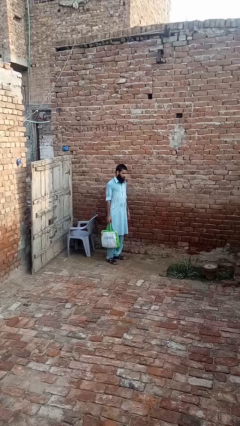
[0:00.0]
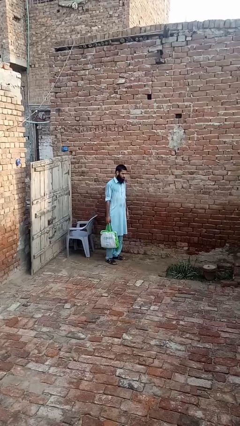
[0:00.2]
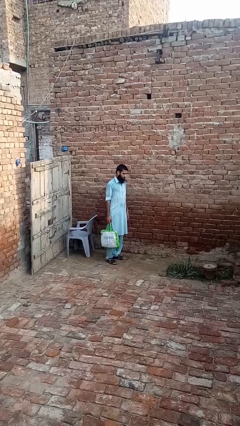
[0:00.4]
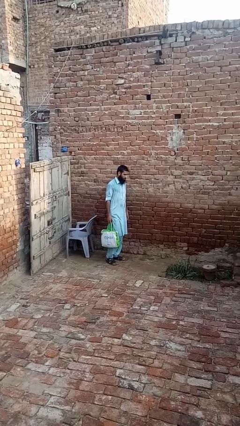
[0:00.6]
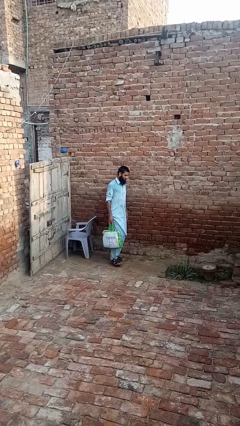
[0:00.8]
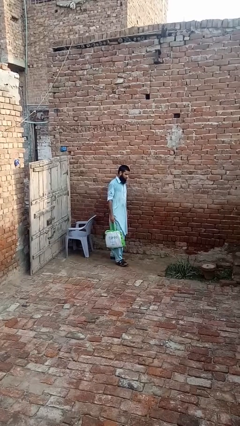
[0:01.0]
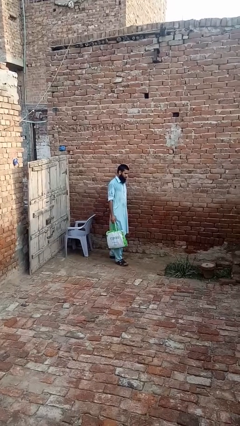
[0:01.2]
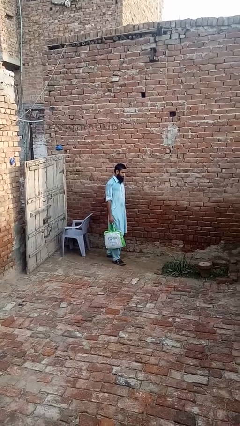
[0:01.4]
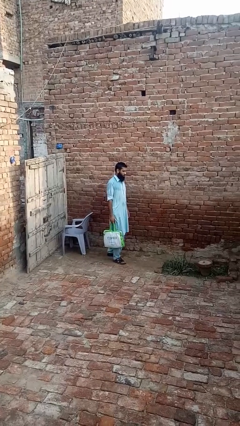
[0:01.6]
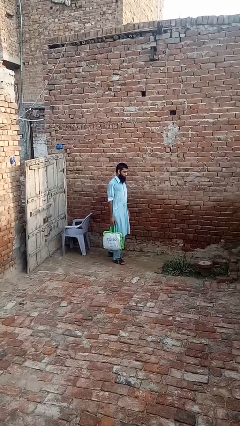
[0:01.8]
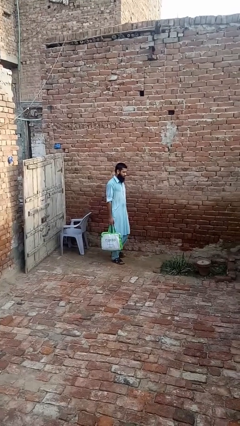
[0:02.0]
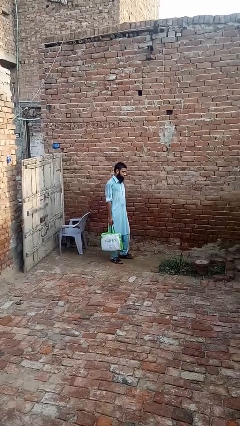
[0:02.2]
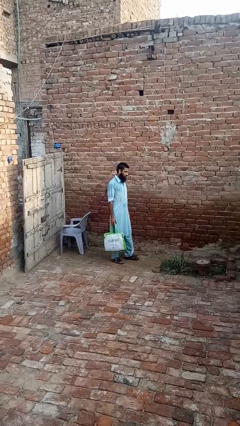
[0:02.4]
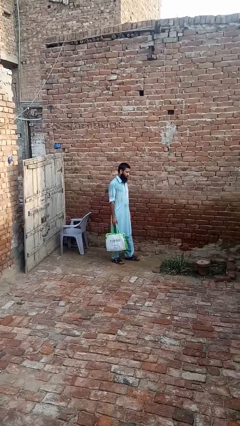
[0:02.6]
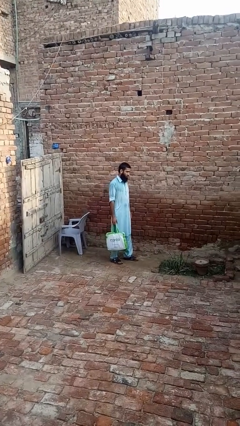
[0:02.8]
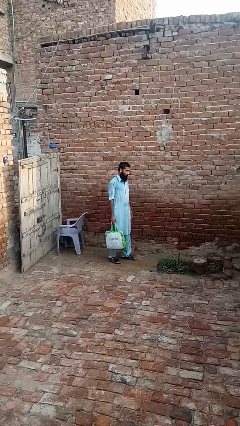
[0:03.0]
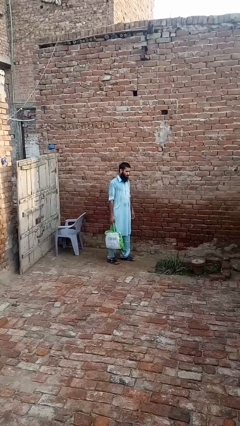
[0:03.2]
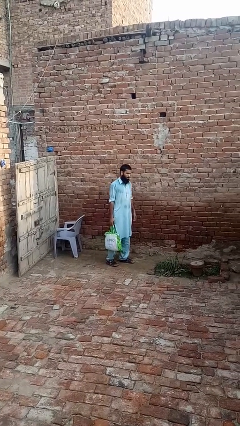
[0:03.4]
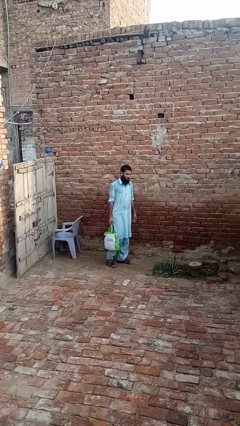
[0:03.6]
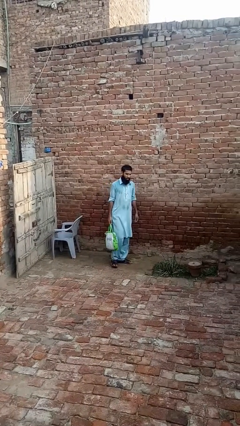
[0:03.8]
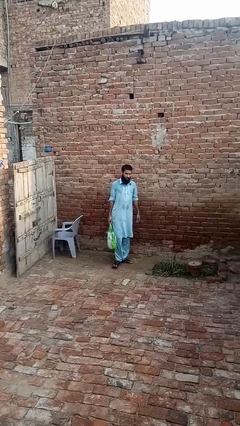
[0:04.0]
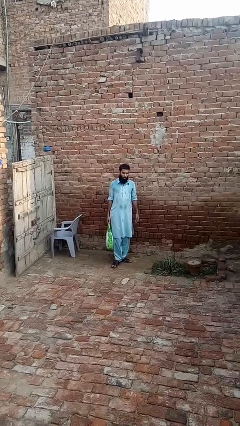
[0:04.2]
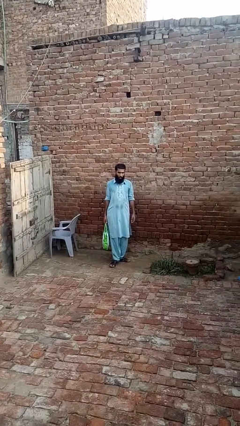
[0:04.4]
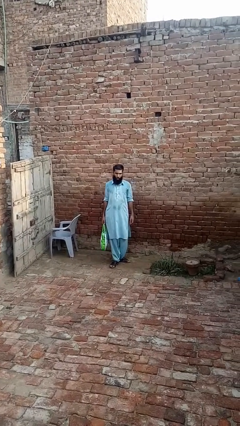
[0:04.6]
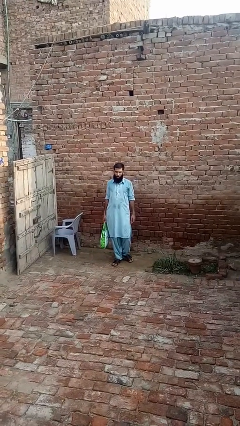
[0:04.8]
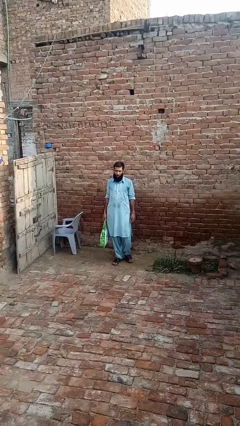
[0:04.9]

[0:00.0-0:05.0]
person carries groceries

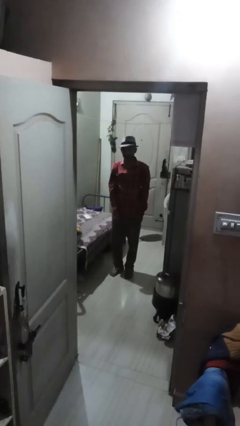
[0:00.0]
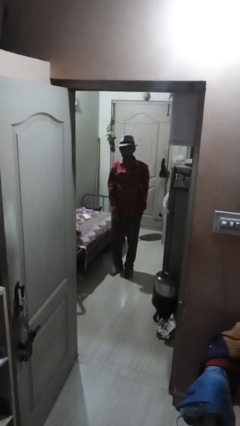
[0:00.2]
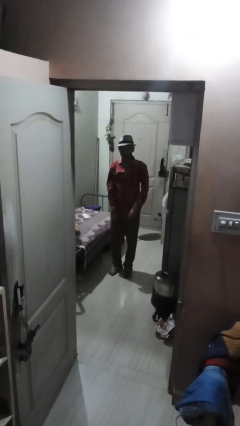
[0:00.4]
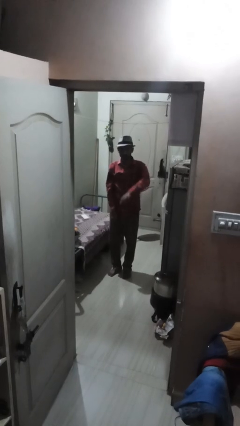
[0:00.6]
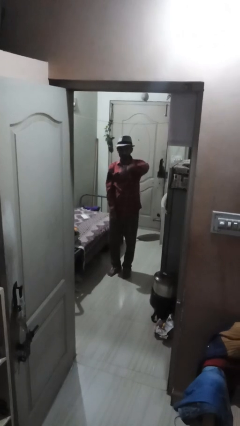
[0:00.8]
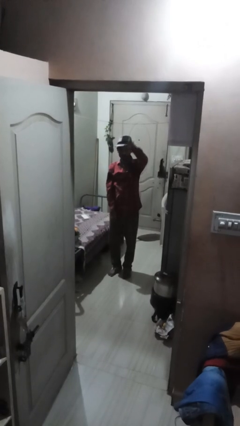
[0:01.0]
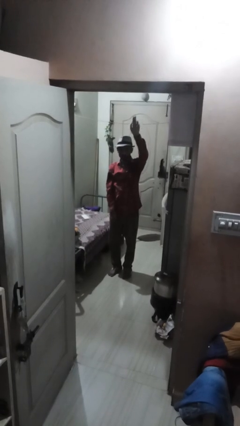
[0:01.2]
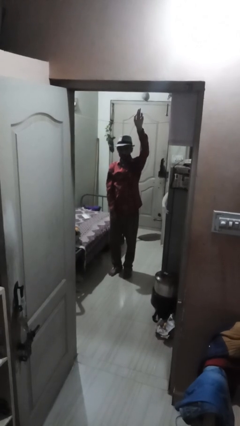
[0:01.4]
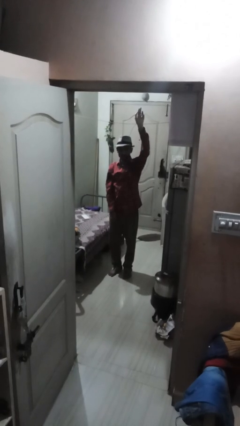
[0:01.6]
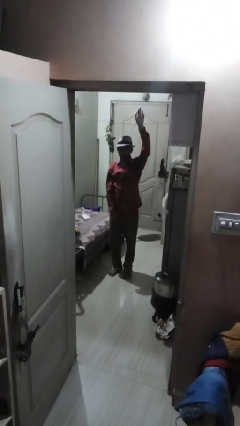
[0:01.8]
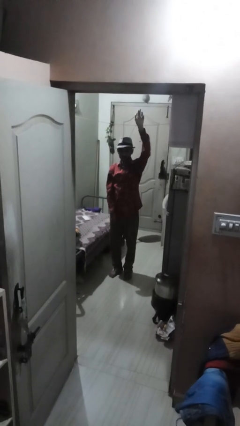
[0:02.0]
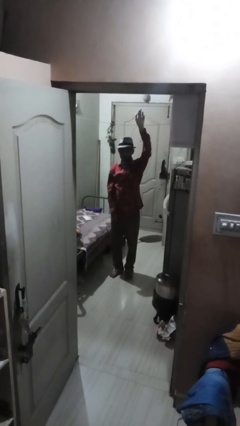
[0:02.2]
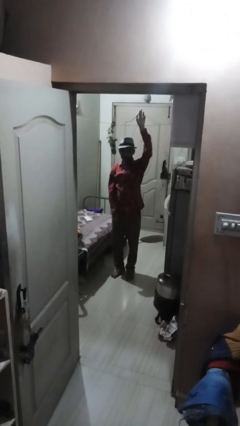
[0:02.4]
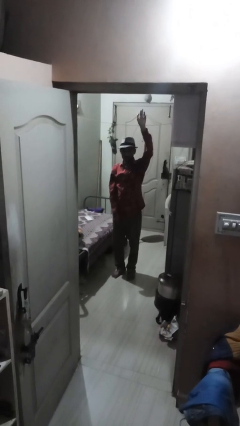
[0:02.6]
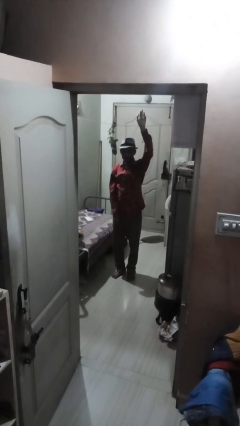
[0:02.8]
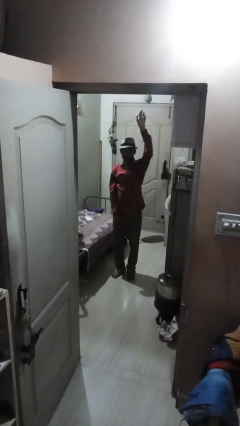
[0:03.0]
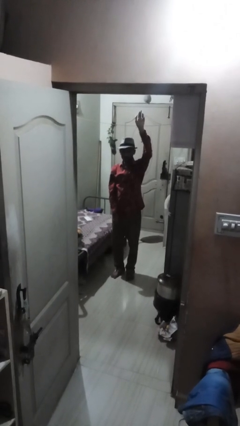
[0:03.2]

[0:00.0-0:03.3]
person gestures swipe up

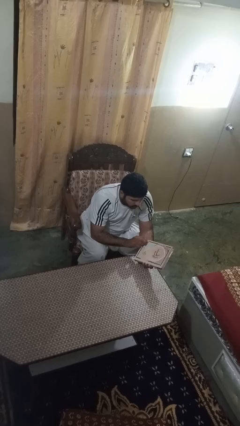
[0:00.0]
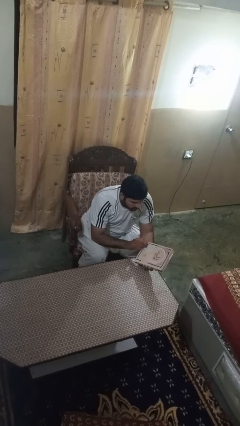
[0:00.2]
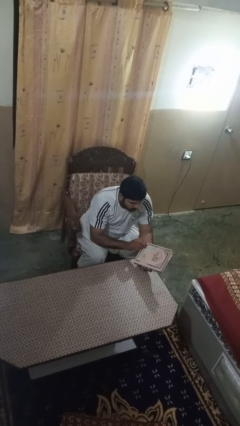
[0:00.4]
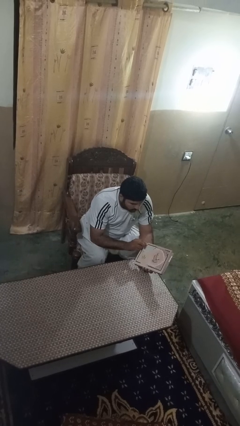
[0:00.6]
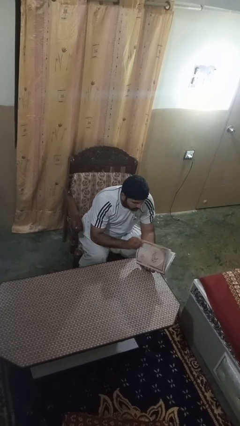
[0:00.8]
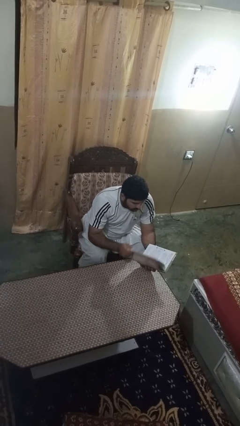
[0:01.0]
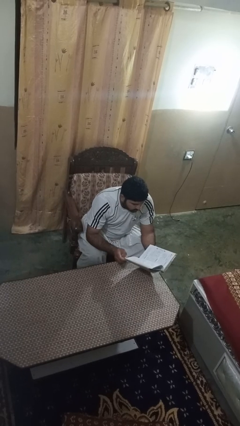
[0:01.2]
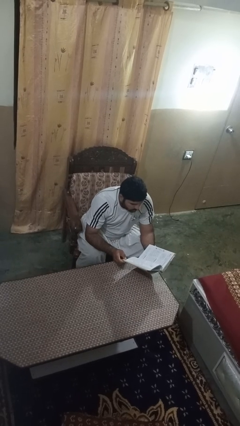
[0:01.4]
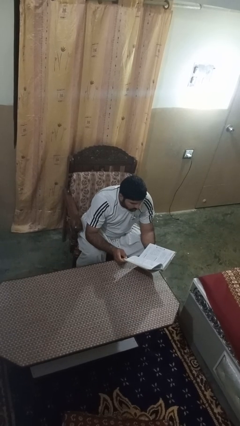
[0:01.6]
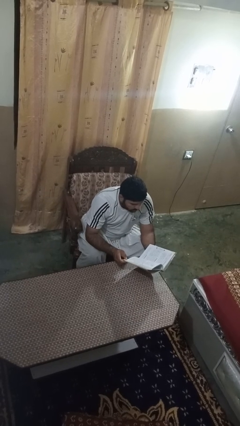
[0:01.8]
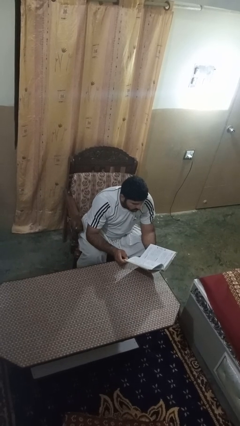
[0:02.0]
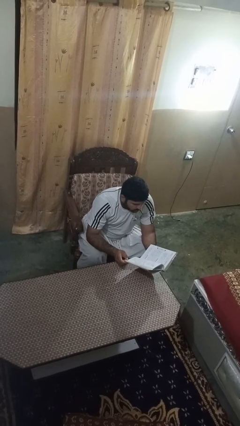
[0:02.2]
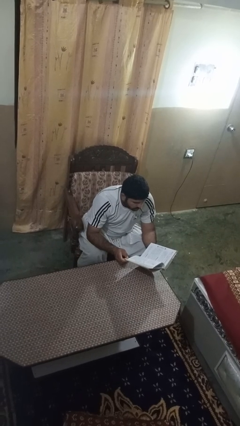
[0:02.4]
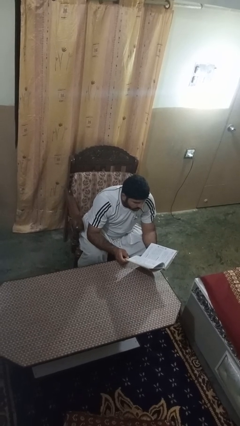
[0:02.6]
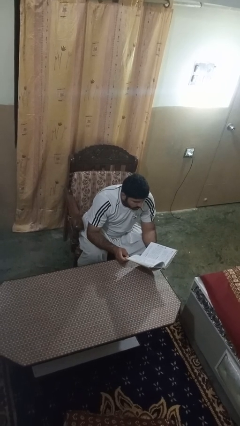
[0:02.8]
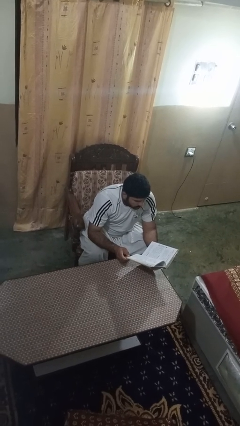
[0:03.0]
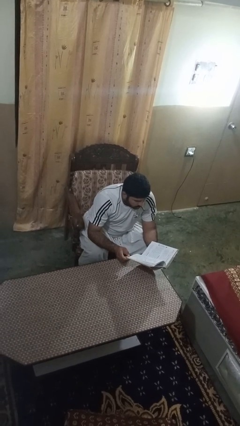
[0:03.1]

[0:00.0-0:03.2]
person reads book

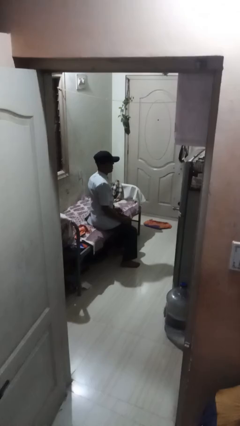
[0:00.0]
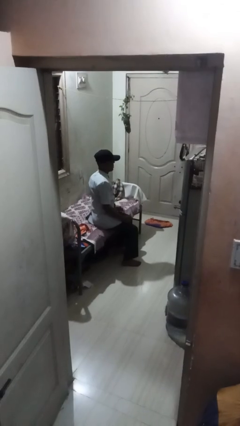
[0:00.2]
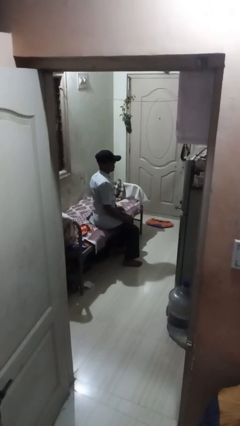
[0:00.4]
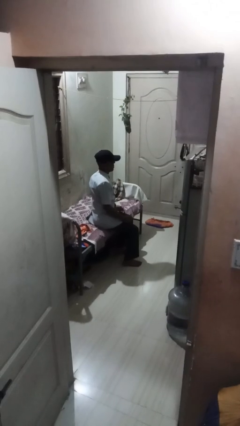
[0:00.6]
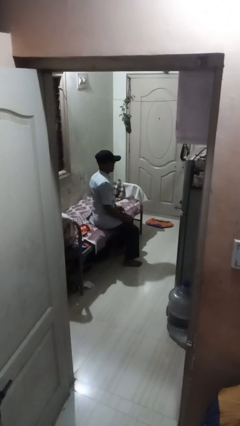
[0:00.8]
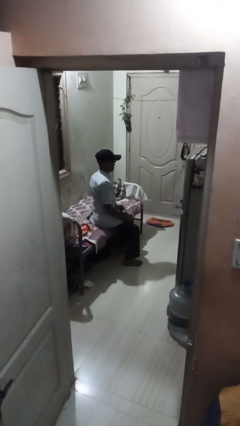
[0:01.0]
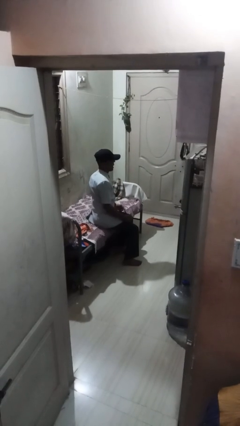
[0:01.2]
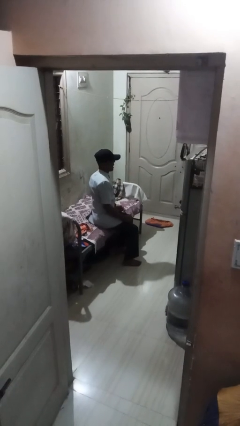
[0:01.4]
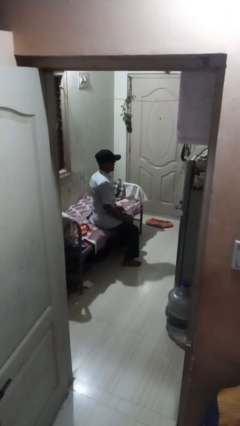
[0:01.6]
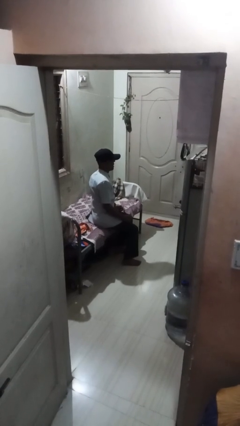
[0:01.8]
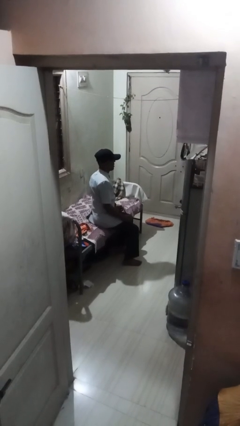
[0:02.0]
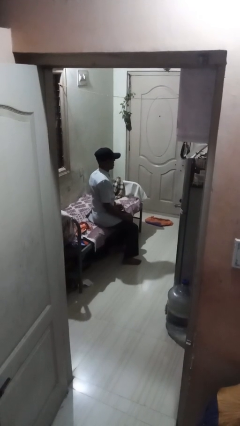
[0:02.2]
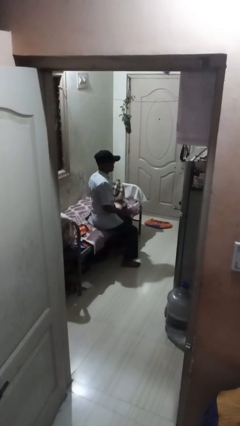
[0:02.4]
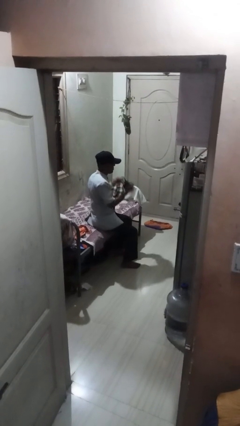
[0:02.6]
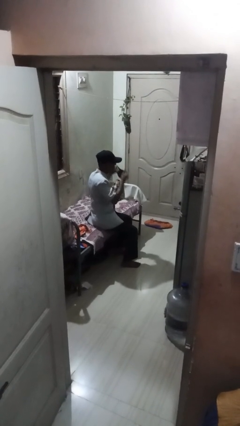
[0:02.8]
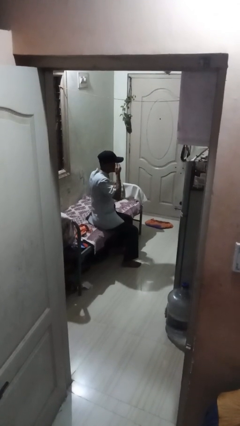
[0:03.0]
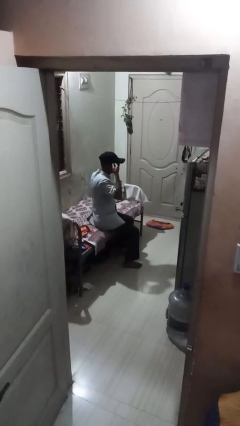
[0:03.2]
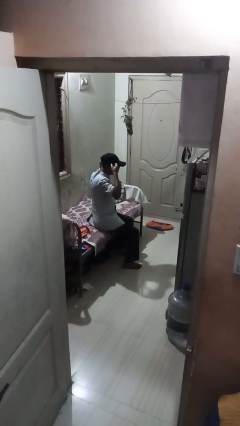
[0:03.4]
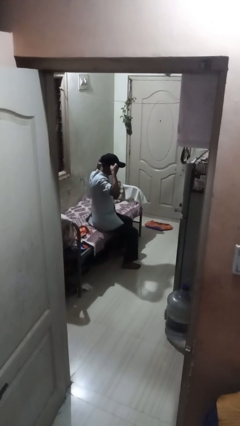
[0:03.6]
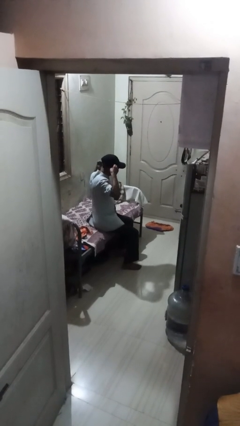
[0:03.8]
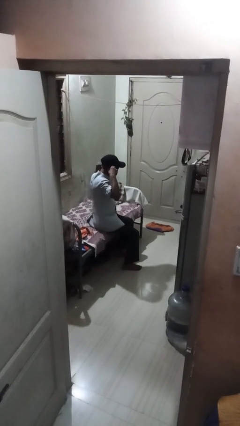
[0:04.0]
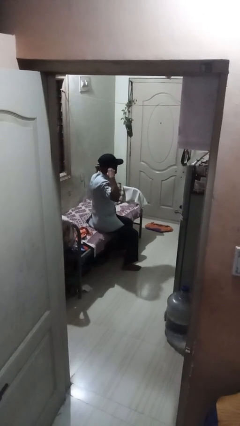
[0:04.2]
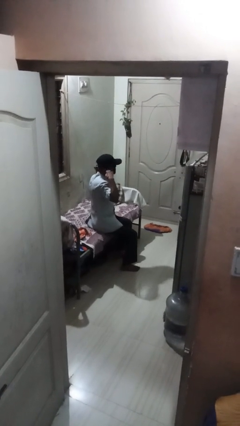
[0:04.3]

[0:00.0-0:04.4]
person puts on facemask

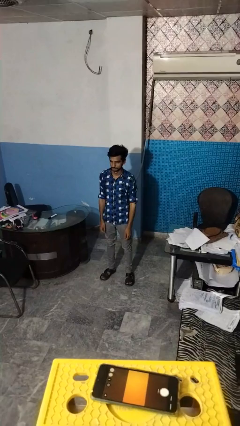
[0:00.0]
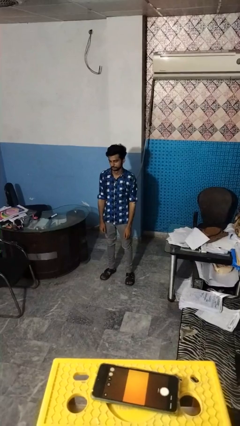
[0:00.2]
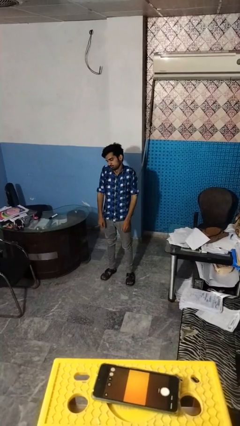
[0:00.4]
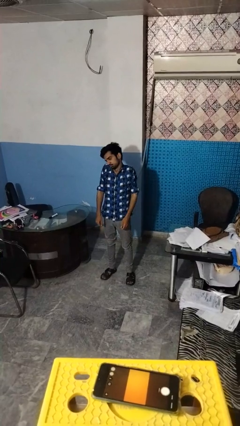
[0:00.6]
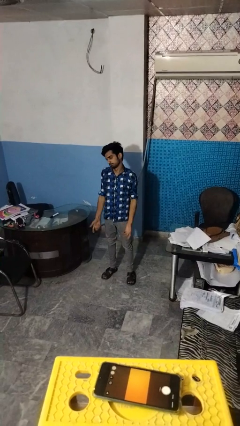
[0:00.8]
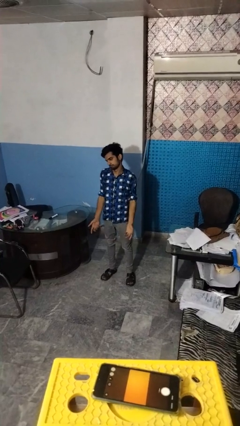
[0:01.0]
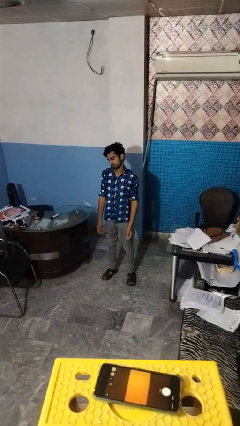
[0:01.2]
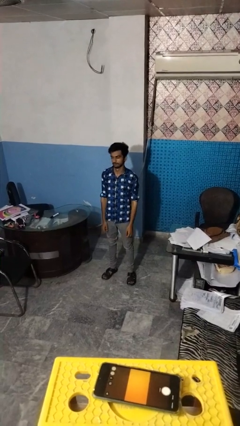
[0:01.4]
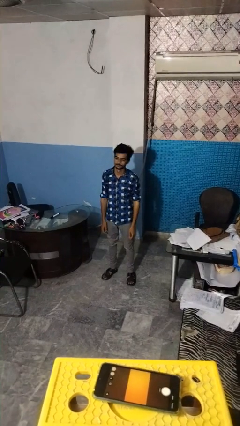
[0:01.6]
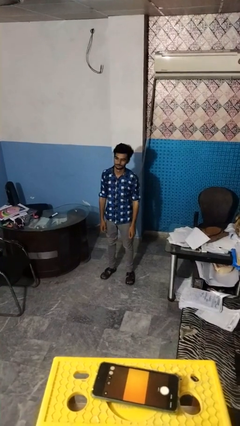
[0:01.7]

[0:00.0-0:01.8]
person shrugs
